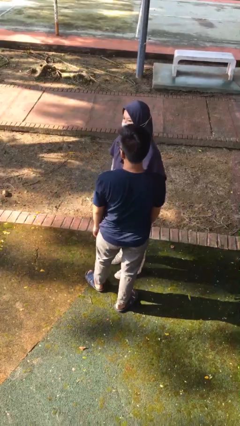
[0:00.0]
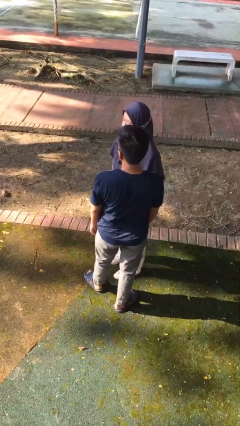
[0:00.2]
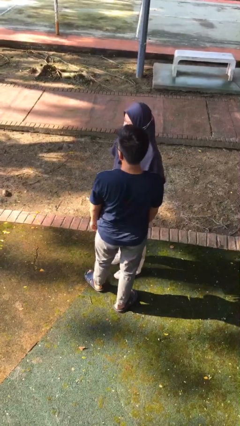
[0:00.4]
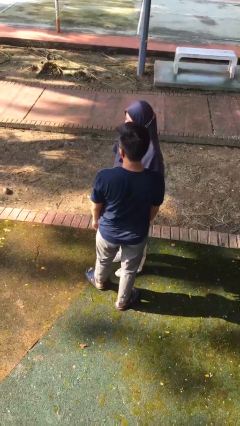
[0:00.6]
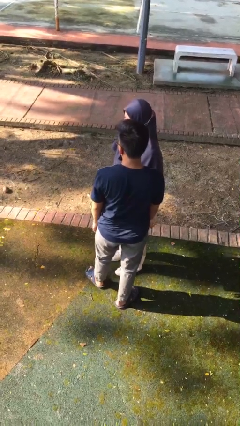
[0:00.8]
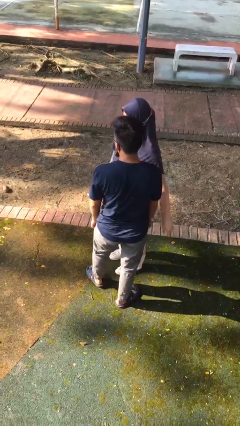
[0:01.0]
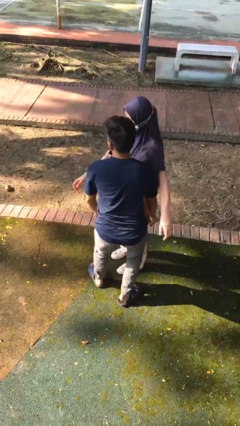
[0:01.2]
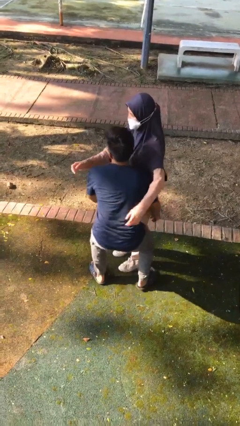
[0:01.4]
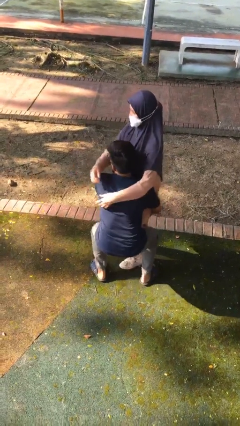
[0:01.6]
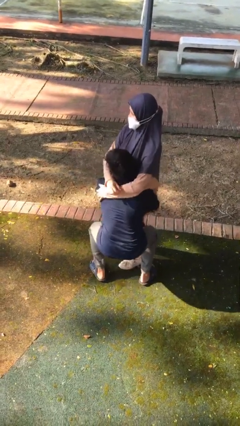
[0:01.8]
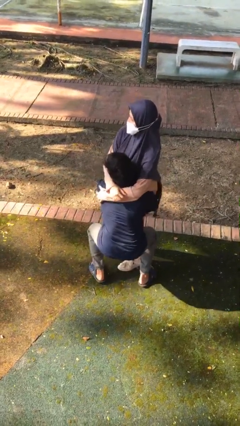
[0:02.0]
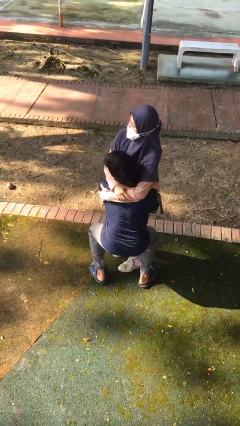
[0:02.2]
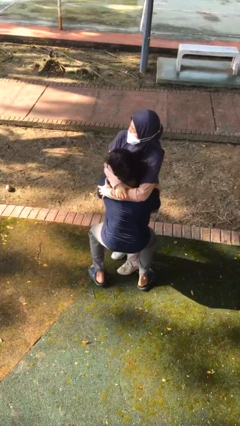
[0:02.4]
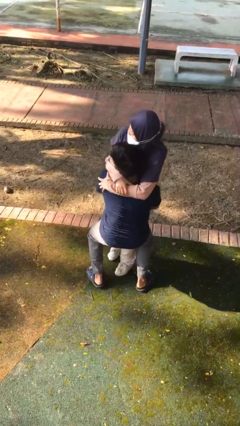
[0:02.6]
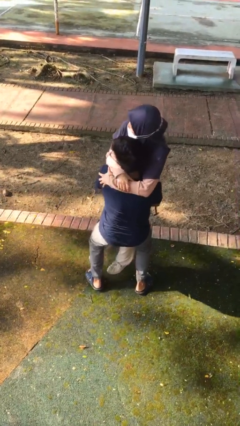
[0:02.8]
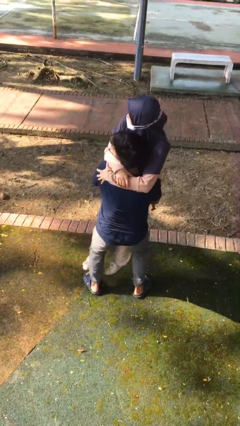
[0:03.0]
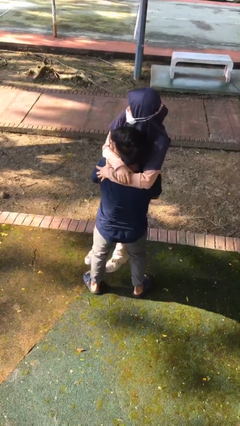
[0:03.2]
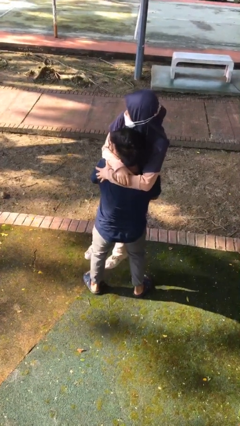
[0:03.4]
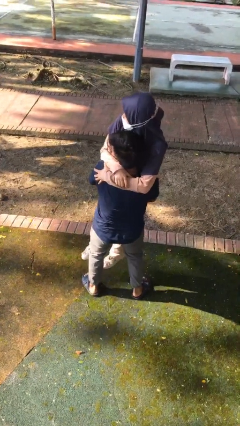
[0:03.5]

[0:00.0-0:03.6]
person picks up person

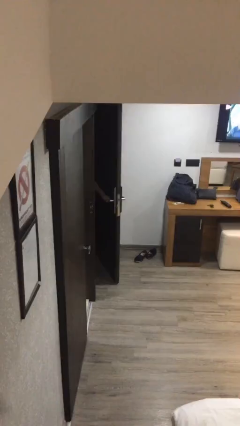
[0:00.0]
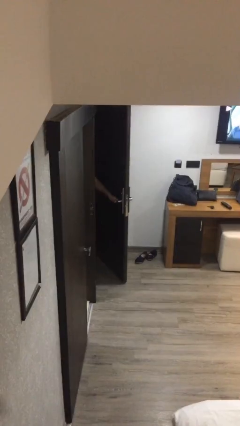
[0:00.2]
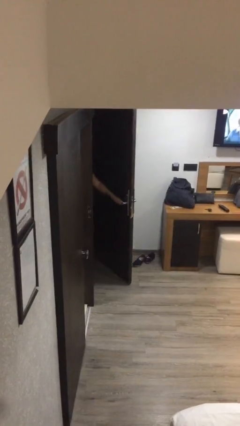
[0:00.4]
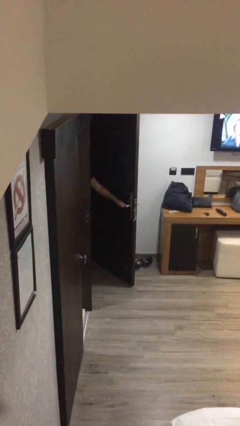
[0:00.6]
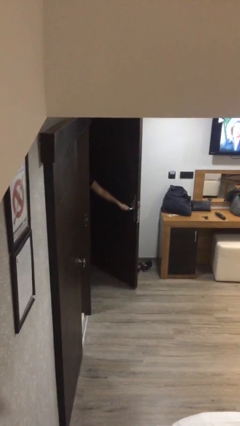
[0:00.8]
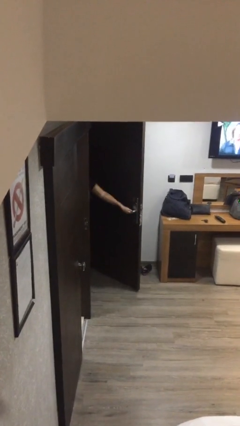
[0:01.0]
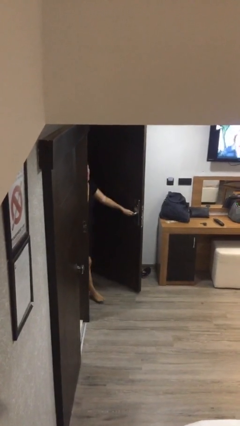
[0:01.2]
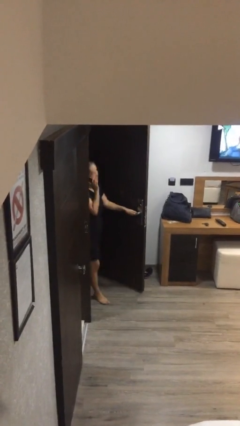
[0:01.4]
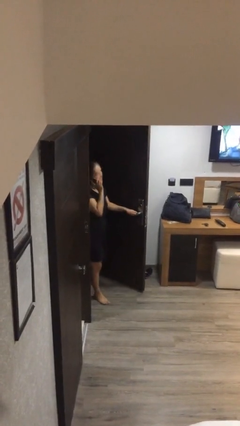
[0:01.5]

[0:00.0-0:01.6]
person opens facility door

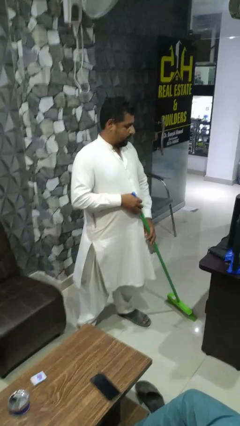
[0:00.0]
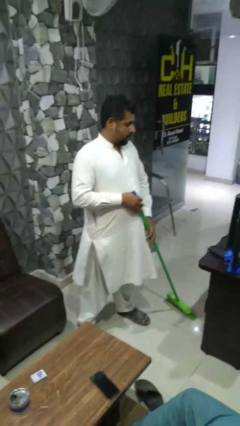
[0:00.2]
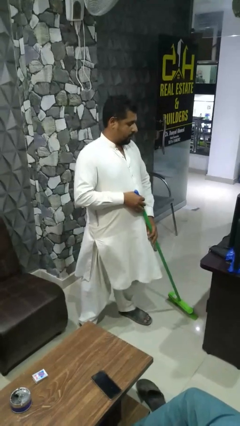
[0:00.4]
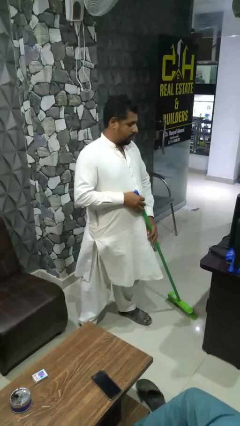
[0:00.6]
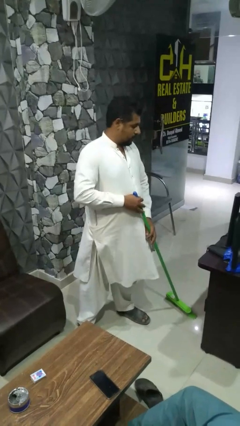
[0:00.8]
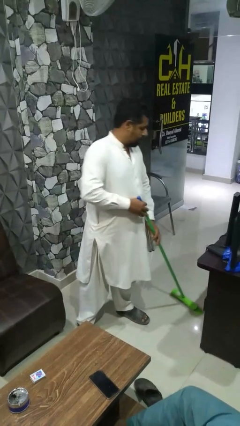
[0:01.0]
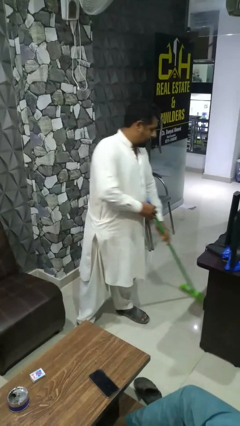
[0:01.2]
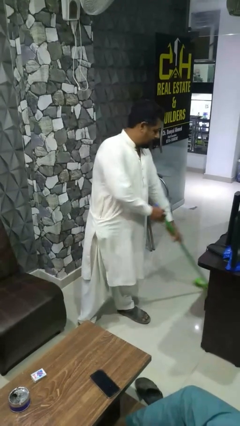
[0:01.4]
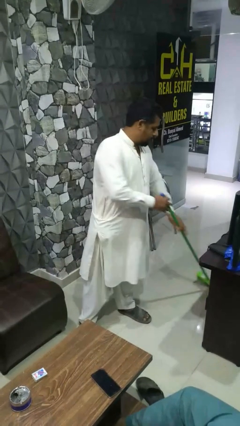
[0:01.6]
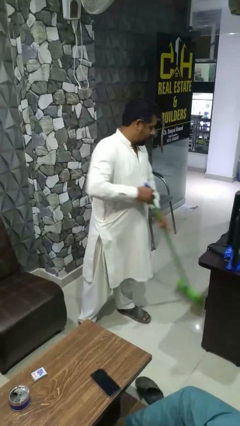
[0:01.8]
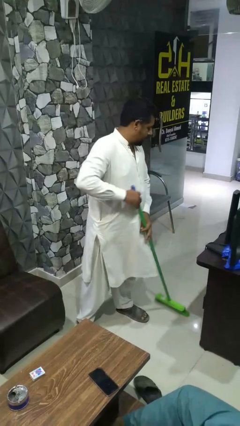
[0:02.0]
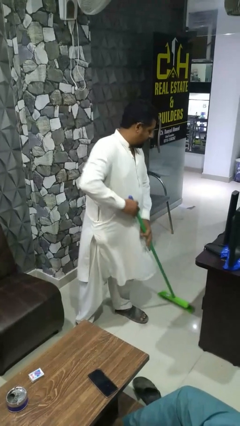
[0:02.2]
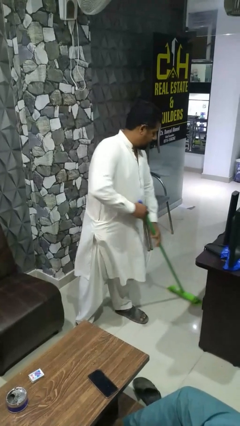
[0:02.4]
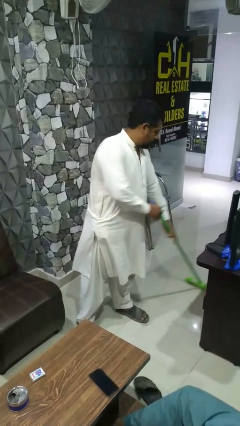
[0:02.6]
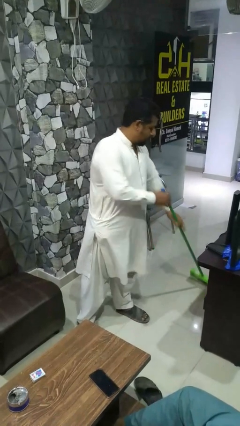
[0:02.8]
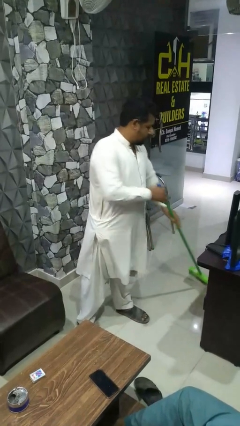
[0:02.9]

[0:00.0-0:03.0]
person mops

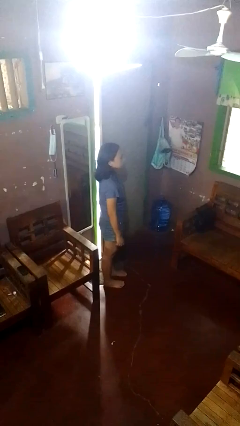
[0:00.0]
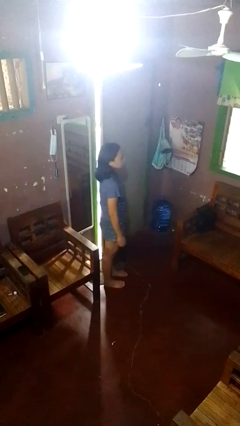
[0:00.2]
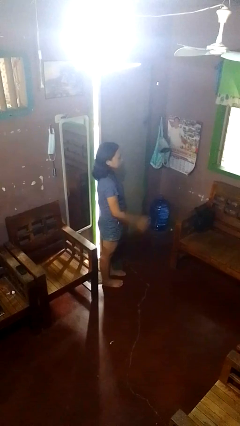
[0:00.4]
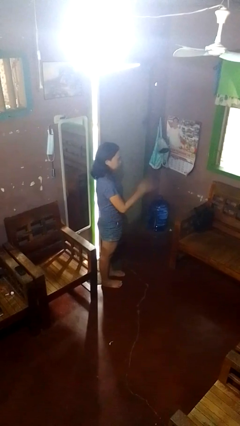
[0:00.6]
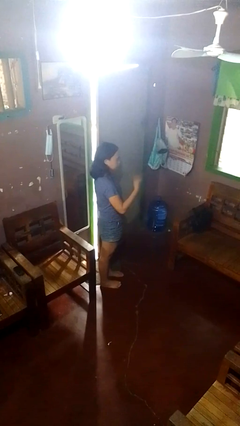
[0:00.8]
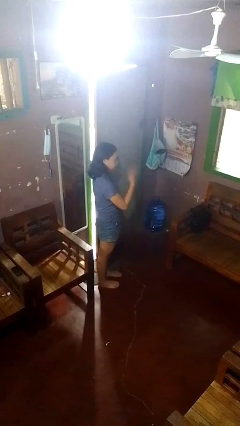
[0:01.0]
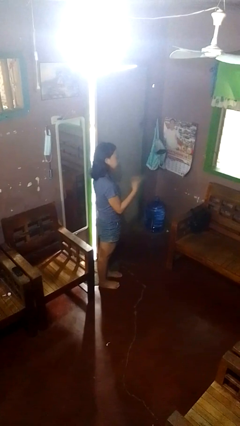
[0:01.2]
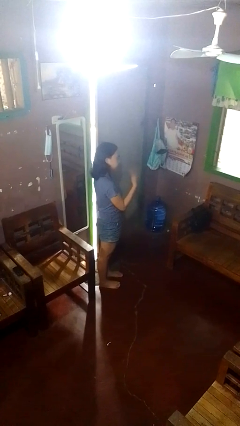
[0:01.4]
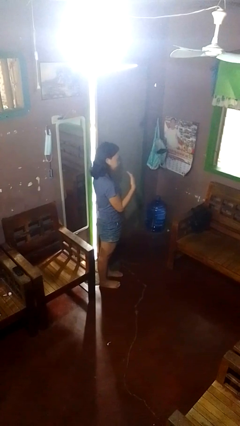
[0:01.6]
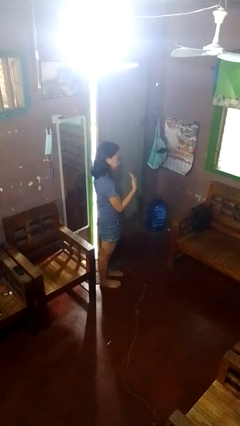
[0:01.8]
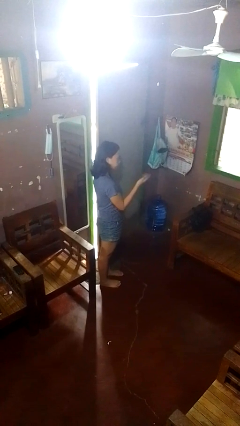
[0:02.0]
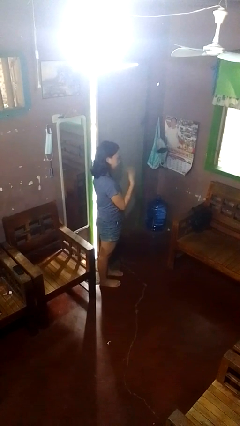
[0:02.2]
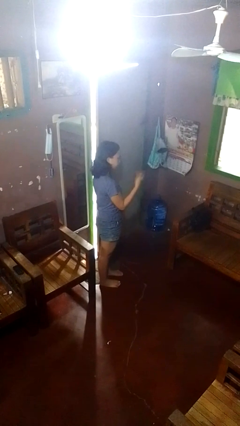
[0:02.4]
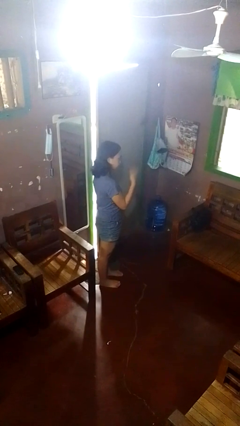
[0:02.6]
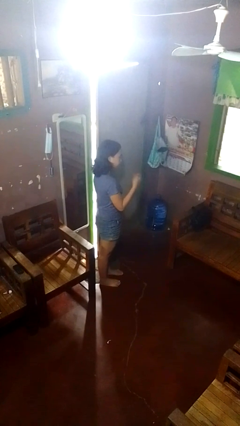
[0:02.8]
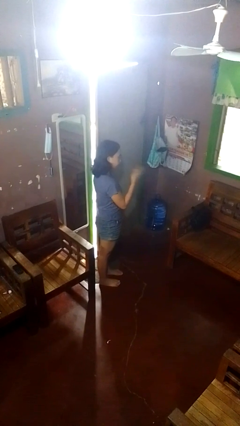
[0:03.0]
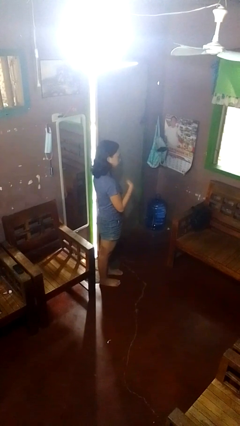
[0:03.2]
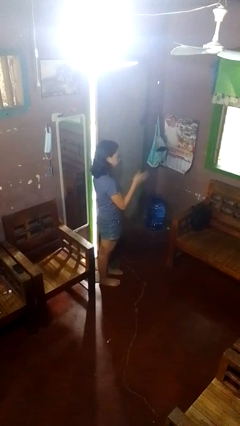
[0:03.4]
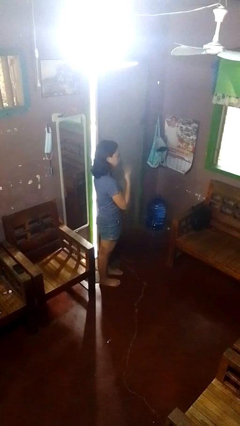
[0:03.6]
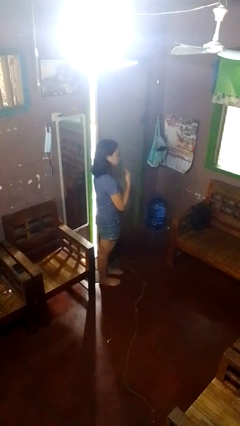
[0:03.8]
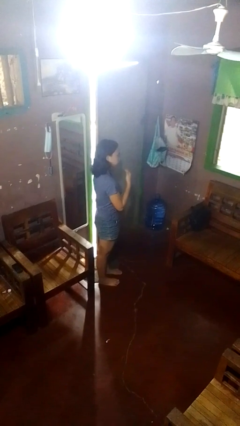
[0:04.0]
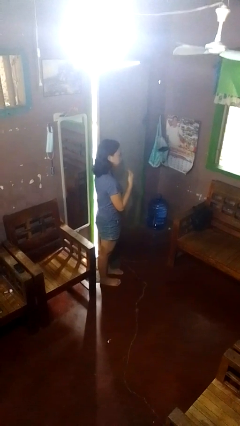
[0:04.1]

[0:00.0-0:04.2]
person gestures come here

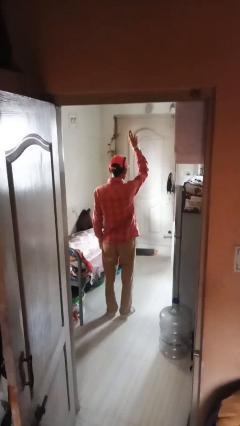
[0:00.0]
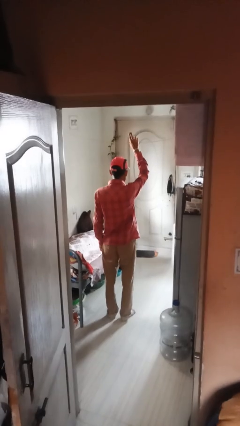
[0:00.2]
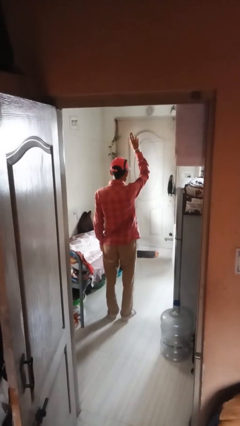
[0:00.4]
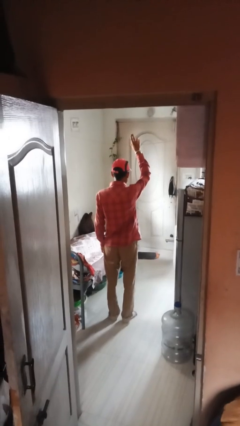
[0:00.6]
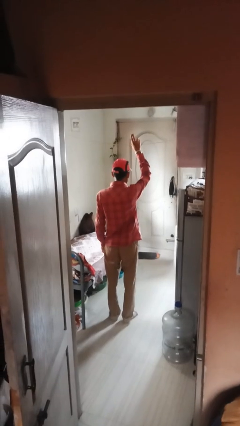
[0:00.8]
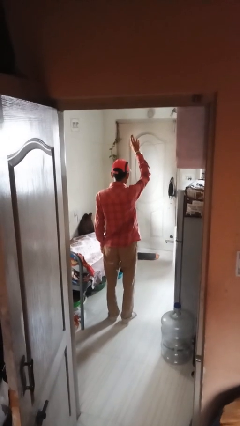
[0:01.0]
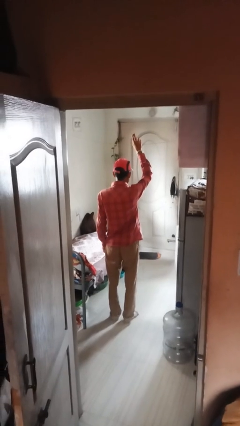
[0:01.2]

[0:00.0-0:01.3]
person gestures swipe down

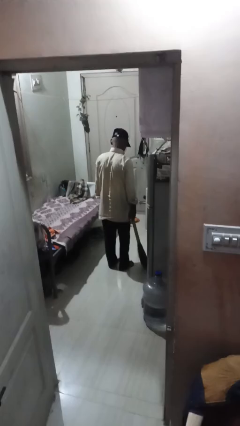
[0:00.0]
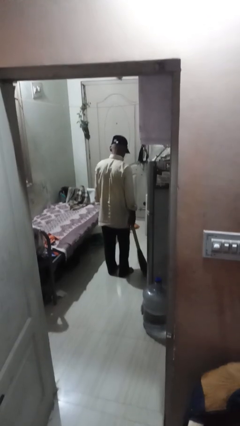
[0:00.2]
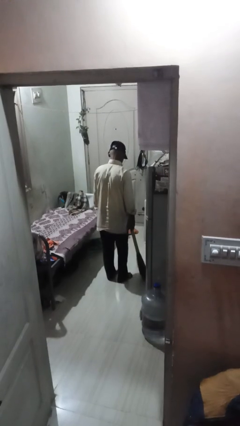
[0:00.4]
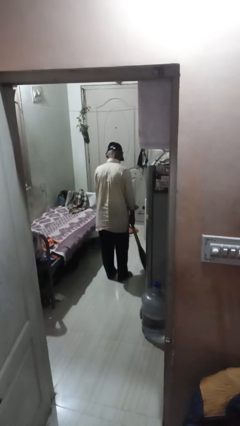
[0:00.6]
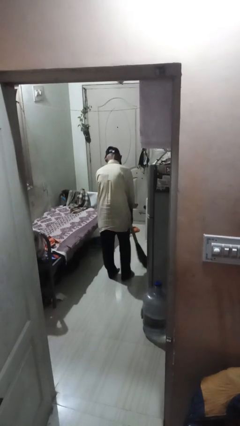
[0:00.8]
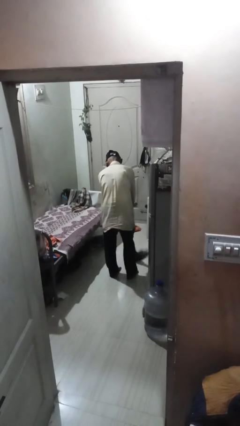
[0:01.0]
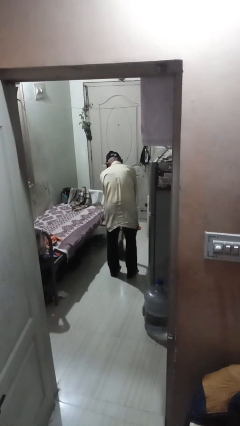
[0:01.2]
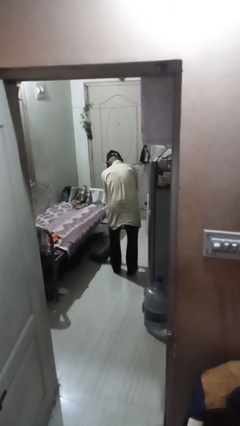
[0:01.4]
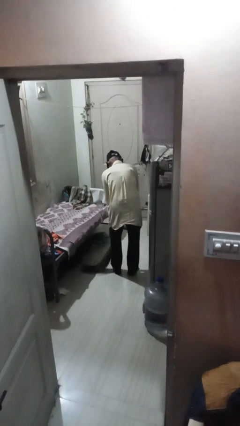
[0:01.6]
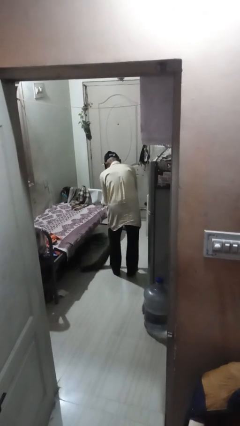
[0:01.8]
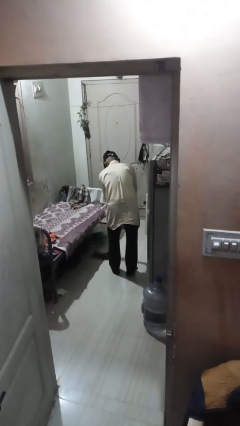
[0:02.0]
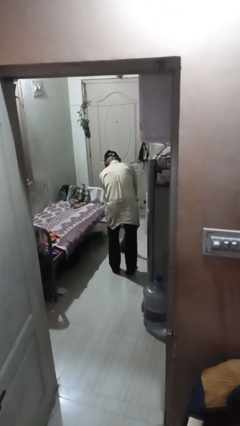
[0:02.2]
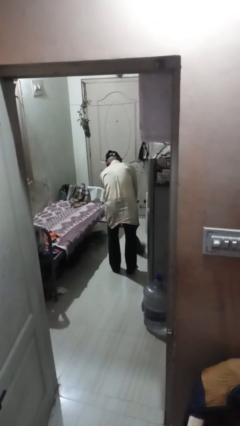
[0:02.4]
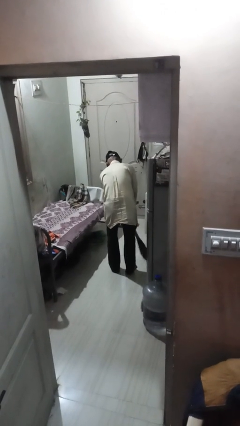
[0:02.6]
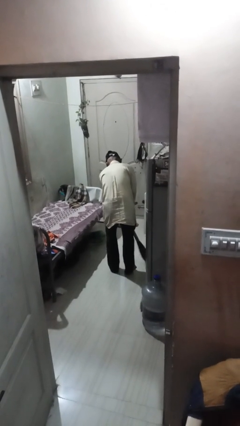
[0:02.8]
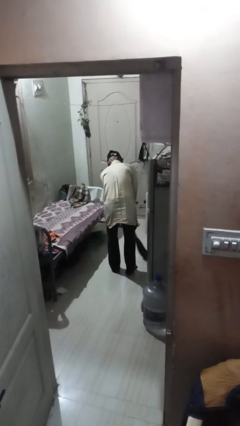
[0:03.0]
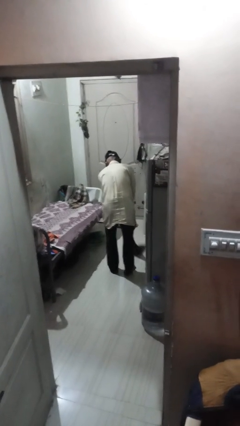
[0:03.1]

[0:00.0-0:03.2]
person sweeps floor

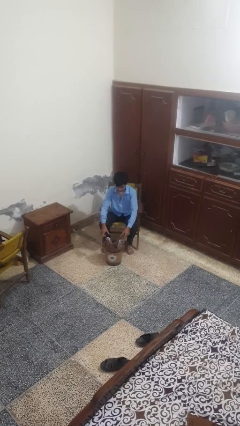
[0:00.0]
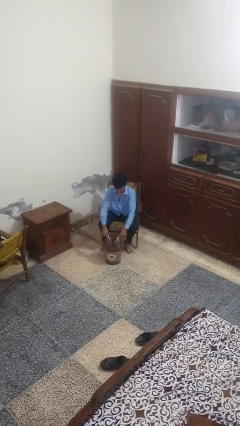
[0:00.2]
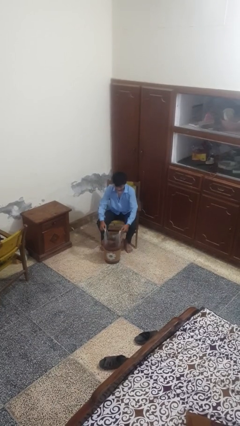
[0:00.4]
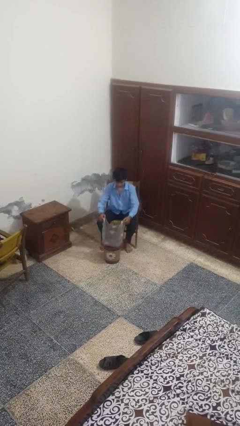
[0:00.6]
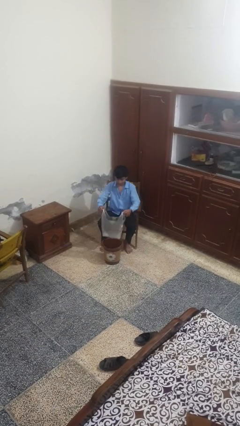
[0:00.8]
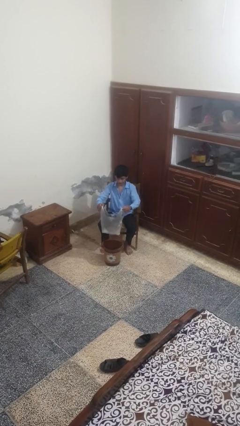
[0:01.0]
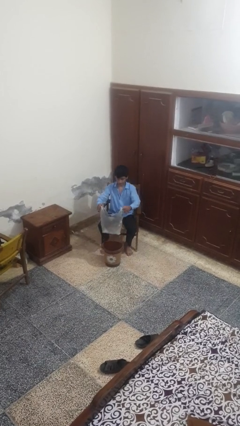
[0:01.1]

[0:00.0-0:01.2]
person removes trashbag from trashcan
